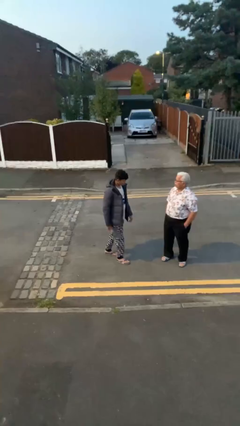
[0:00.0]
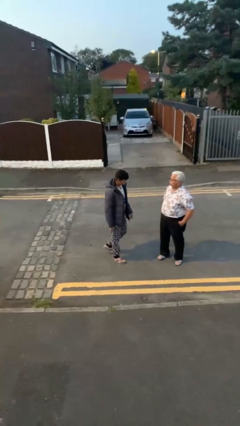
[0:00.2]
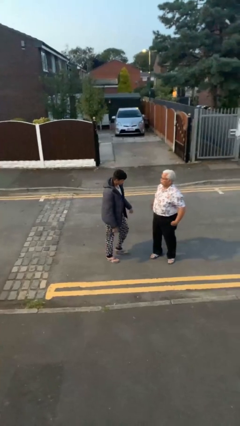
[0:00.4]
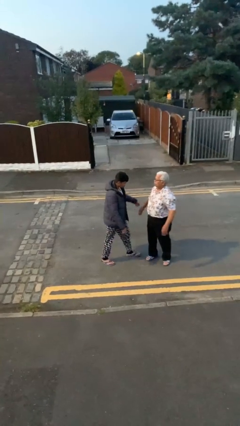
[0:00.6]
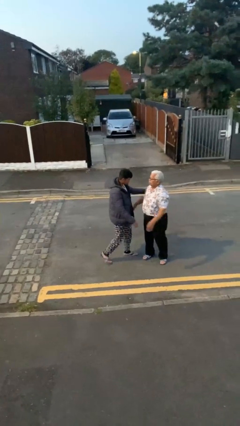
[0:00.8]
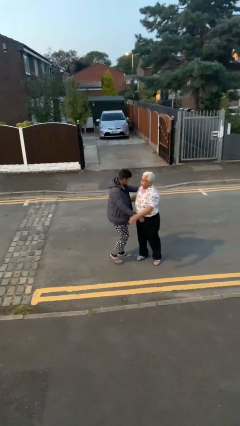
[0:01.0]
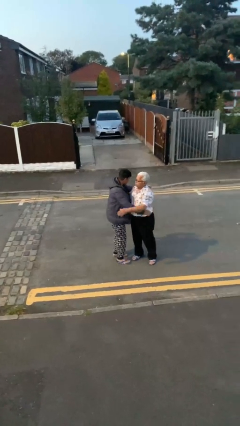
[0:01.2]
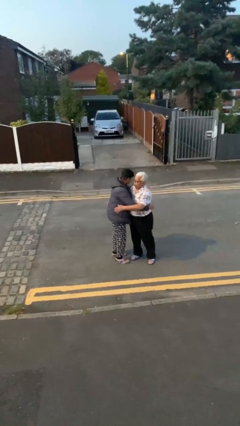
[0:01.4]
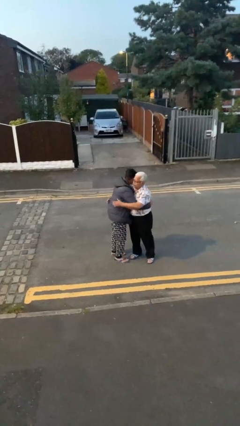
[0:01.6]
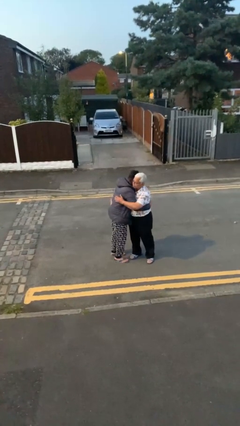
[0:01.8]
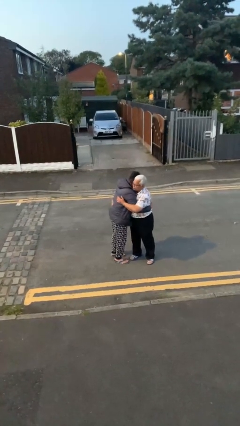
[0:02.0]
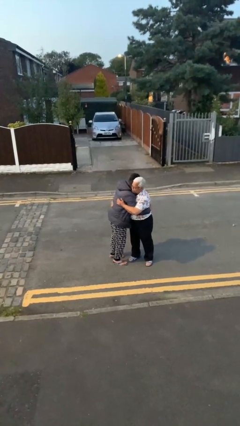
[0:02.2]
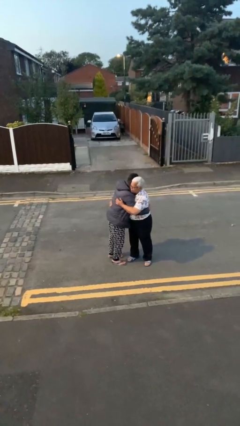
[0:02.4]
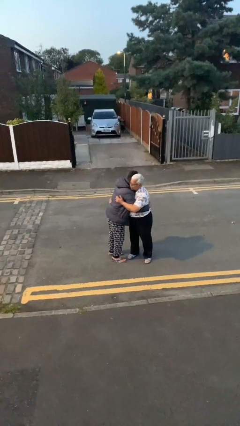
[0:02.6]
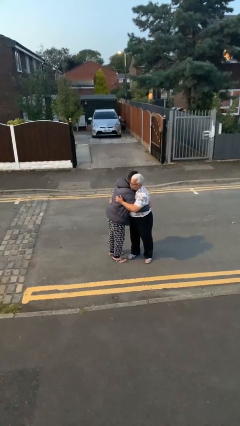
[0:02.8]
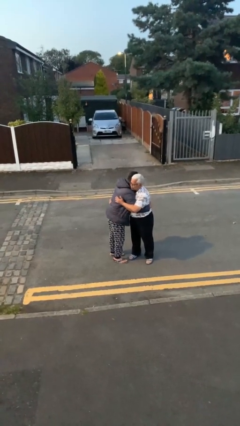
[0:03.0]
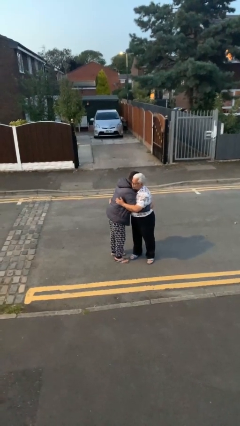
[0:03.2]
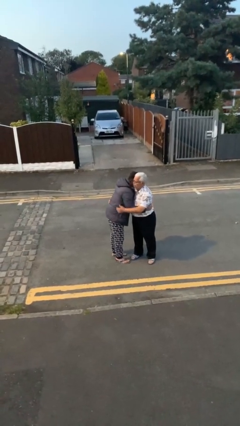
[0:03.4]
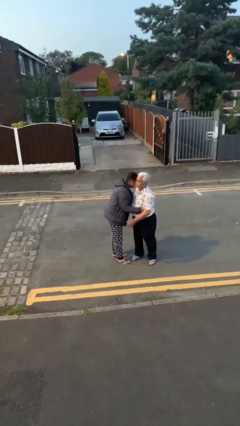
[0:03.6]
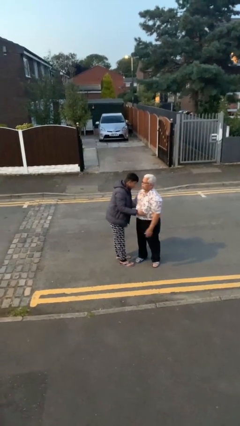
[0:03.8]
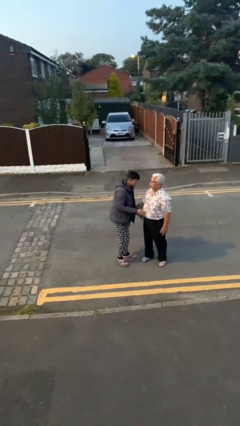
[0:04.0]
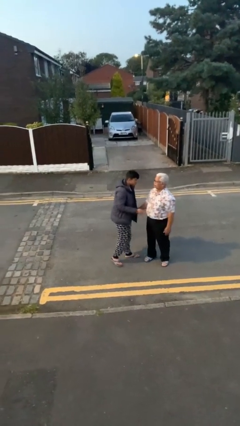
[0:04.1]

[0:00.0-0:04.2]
person embraces person

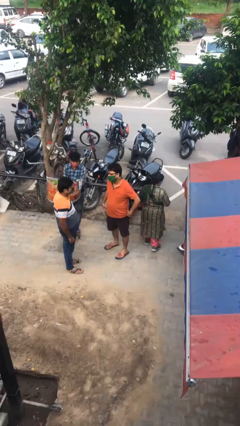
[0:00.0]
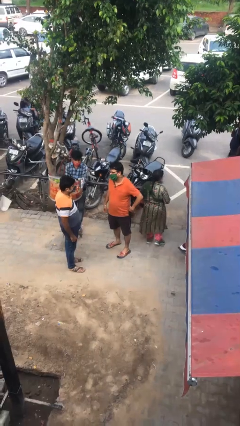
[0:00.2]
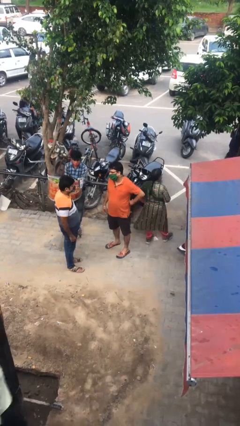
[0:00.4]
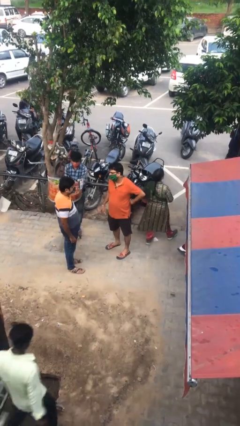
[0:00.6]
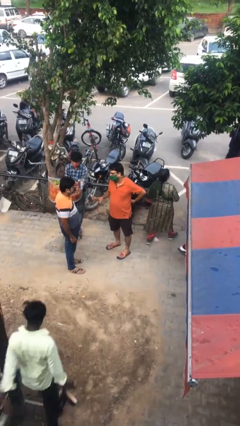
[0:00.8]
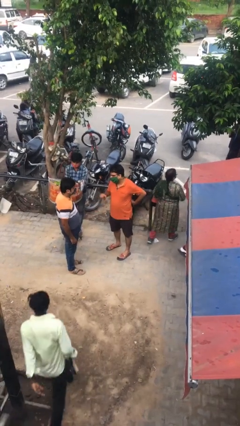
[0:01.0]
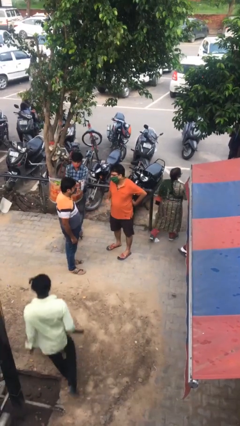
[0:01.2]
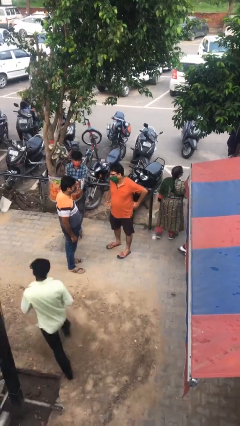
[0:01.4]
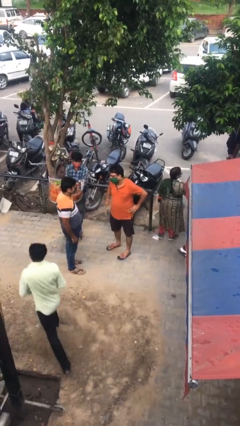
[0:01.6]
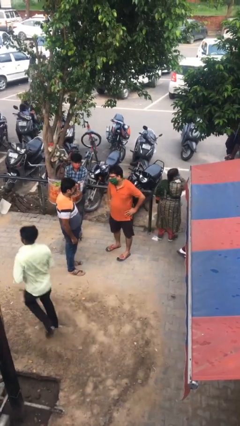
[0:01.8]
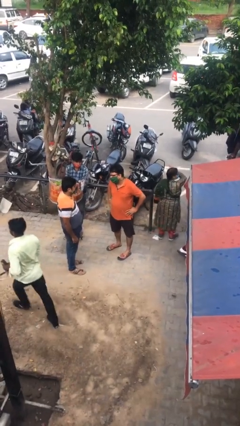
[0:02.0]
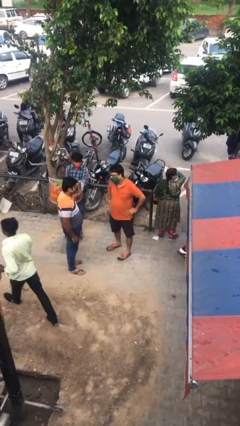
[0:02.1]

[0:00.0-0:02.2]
person talks to person

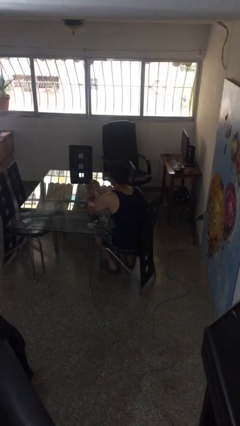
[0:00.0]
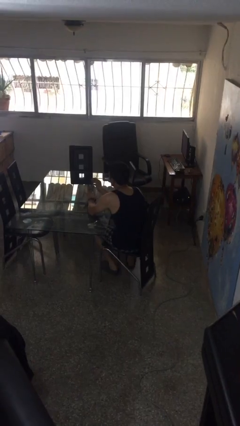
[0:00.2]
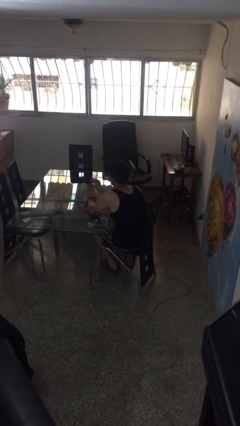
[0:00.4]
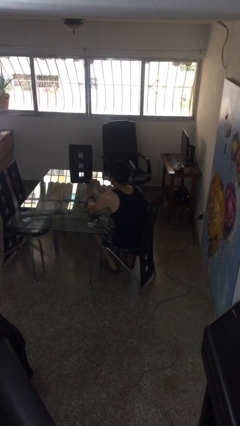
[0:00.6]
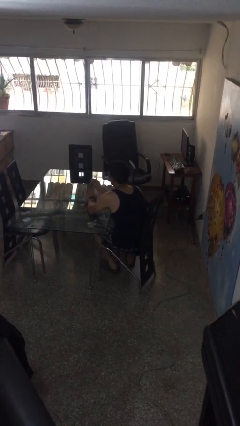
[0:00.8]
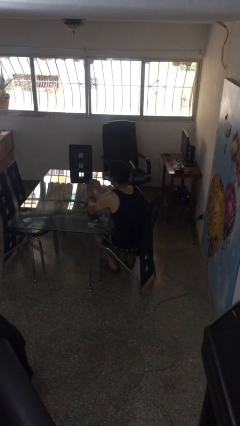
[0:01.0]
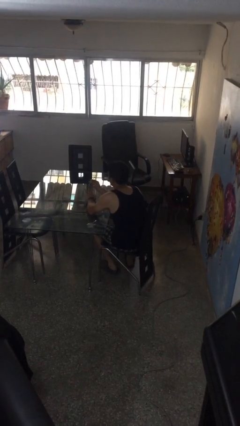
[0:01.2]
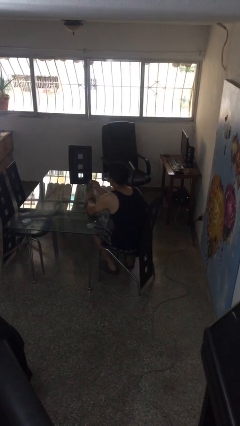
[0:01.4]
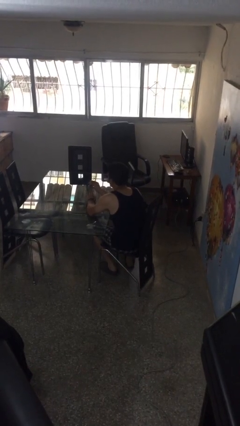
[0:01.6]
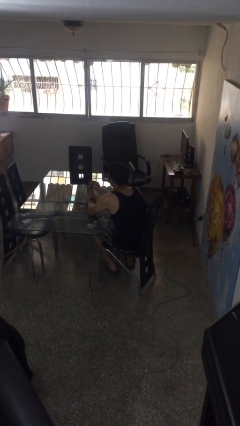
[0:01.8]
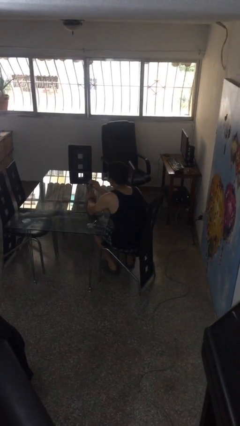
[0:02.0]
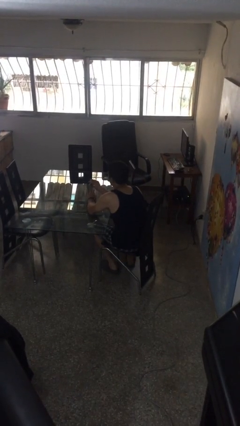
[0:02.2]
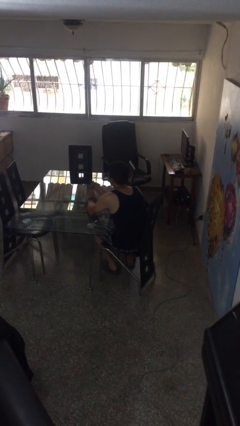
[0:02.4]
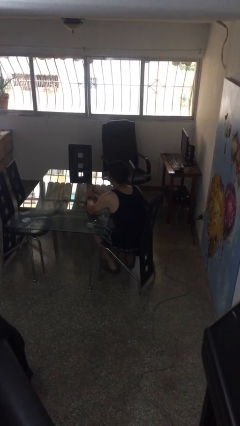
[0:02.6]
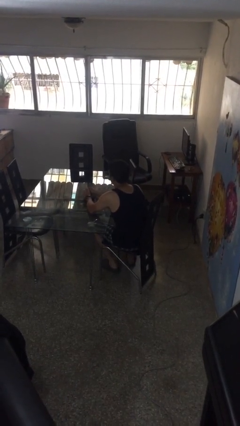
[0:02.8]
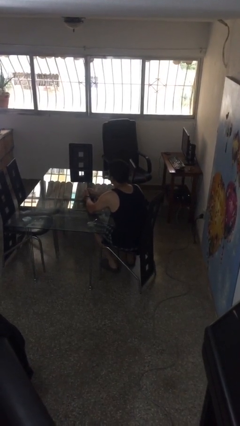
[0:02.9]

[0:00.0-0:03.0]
person clips fingernails

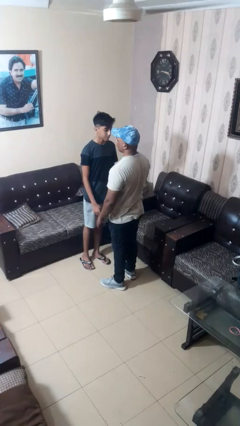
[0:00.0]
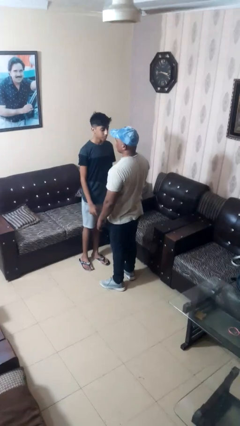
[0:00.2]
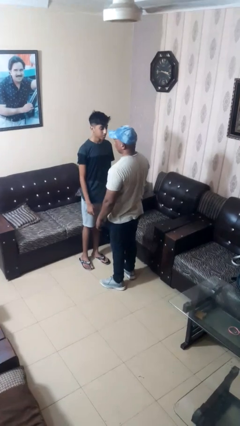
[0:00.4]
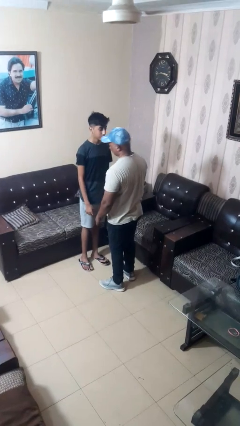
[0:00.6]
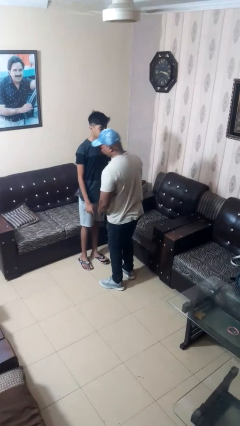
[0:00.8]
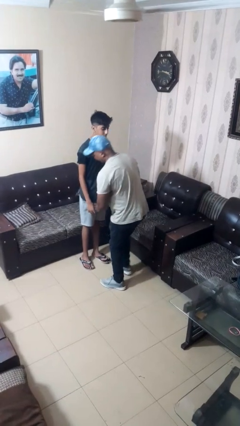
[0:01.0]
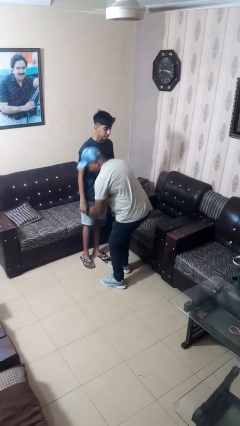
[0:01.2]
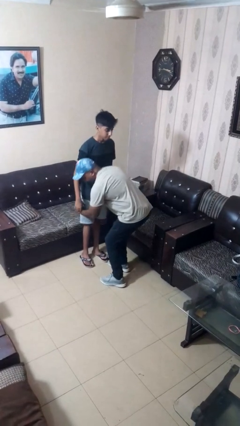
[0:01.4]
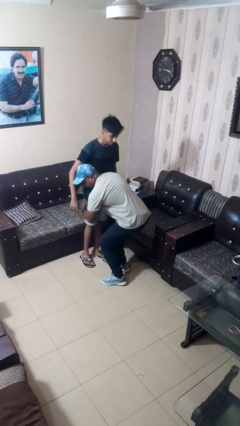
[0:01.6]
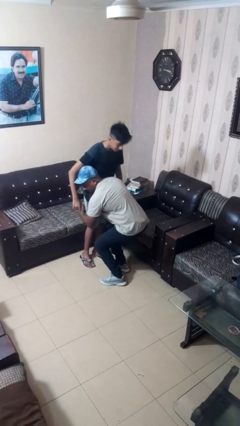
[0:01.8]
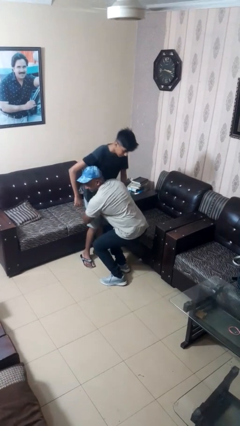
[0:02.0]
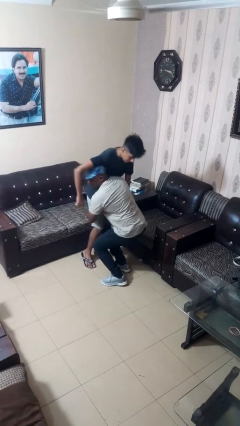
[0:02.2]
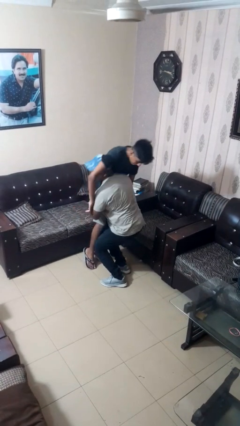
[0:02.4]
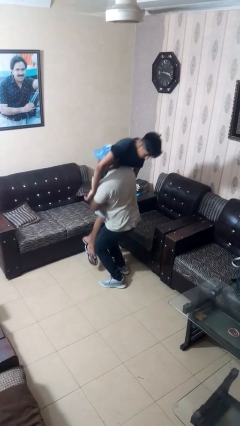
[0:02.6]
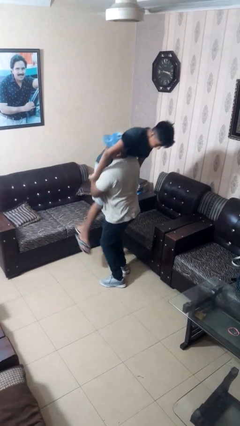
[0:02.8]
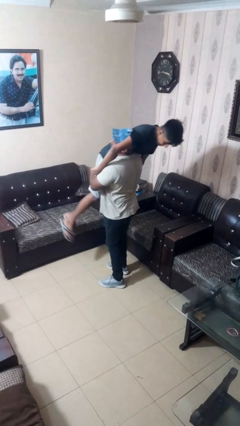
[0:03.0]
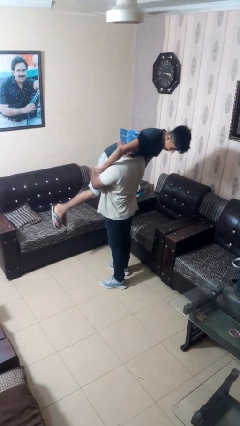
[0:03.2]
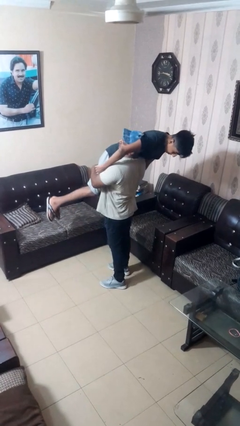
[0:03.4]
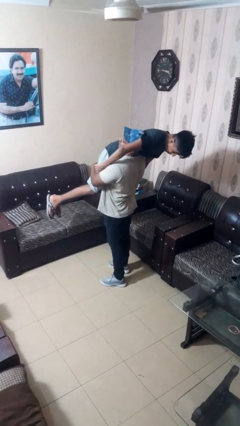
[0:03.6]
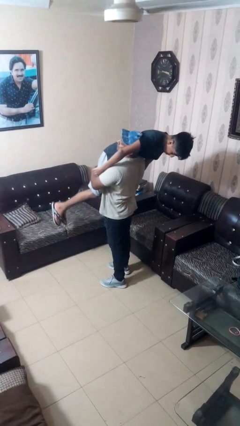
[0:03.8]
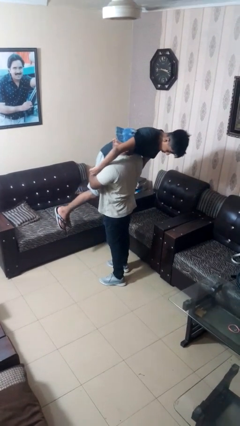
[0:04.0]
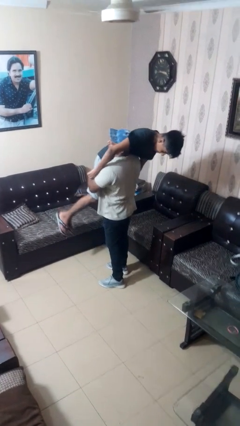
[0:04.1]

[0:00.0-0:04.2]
person picks up person

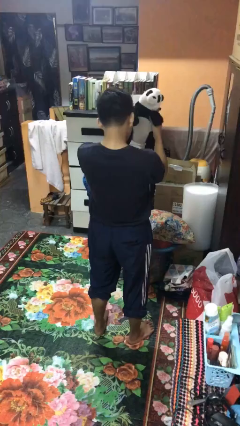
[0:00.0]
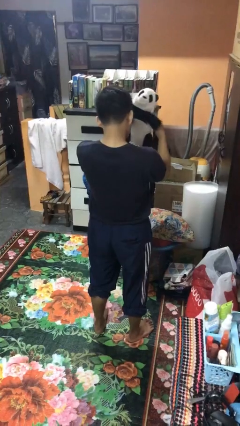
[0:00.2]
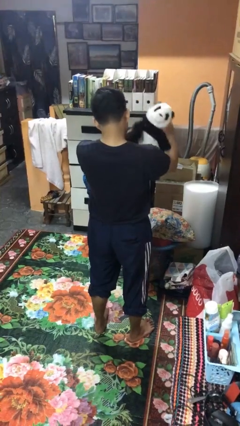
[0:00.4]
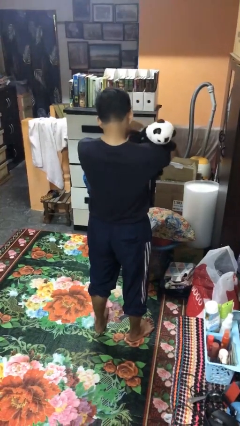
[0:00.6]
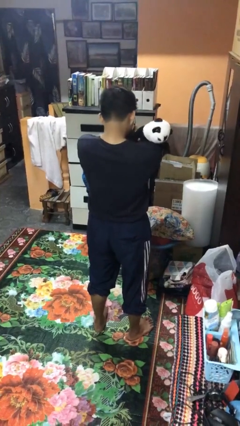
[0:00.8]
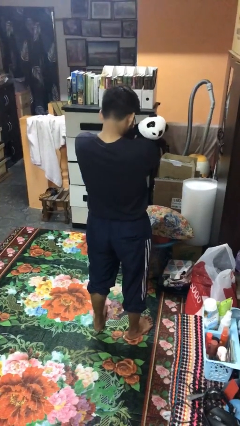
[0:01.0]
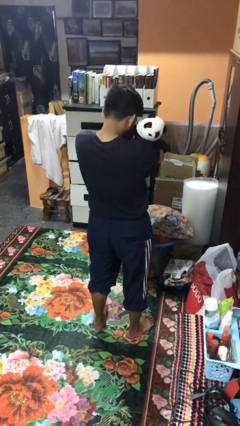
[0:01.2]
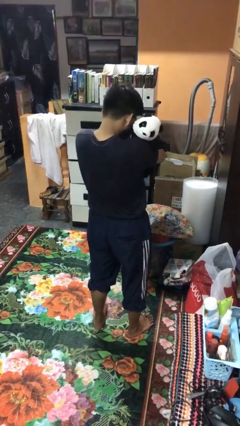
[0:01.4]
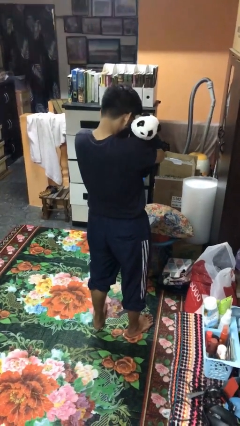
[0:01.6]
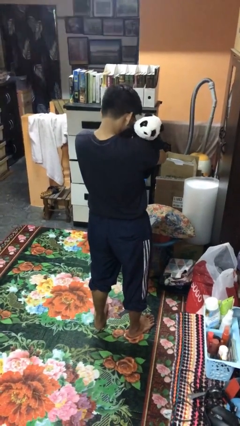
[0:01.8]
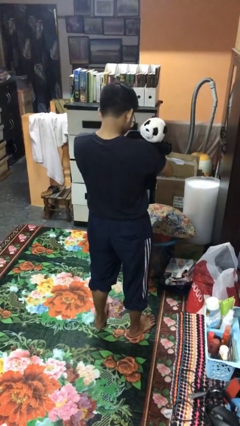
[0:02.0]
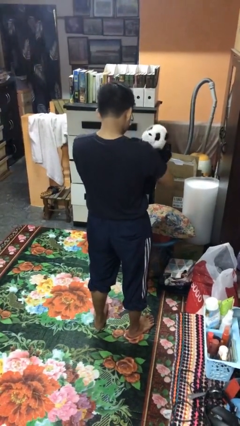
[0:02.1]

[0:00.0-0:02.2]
person hugs stuffed animal

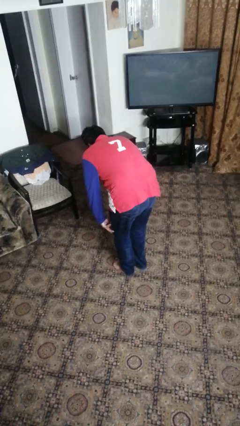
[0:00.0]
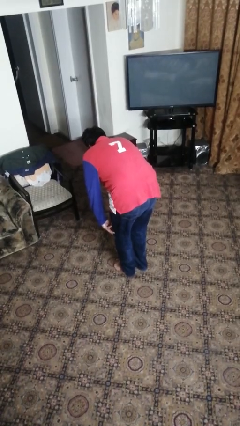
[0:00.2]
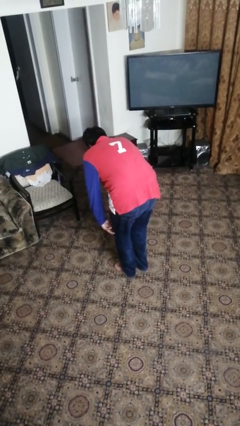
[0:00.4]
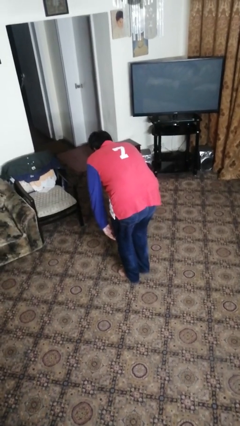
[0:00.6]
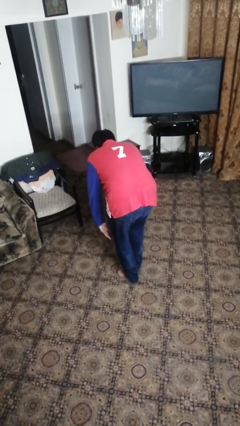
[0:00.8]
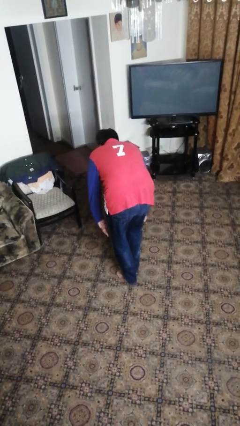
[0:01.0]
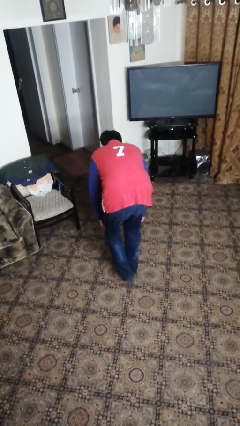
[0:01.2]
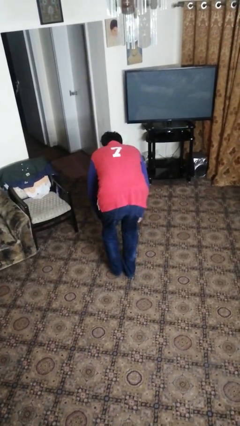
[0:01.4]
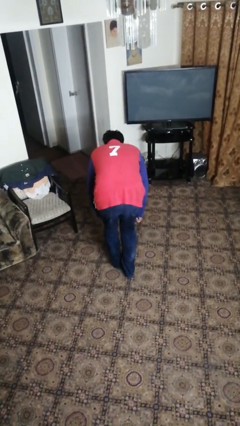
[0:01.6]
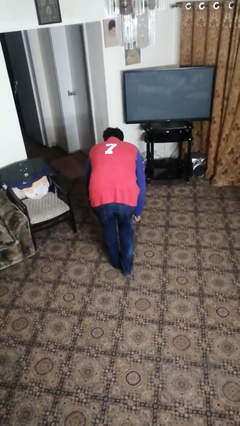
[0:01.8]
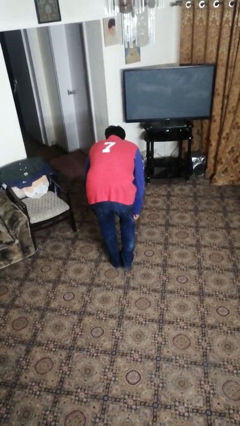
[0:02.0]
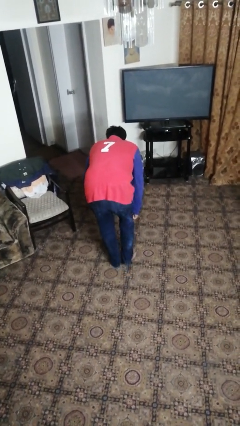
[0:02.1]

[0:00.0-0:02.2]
person walks tiptoe
